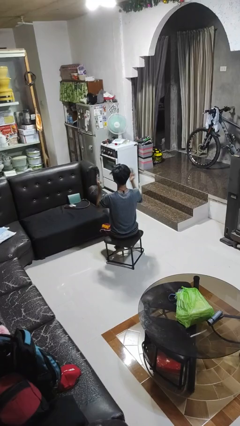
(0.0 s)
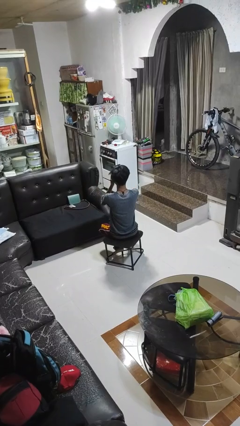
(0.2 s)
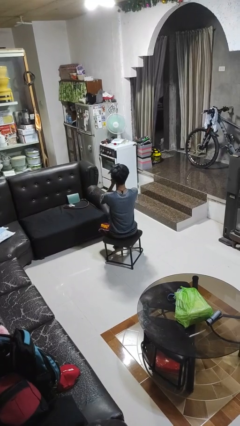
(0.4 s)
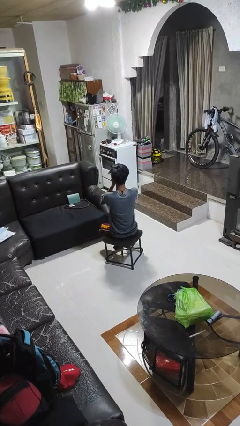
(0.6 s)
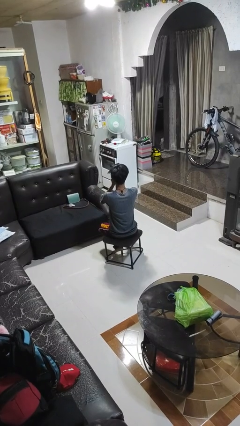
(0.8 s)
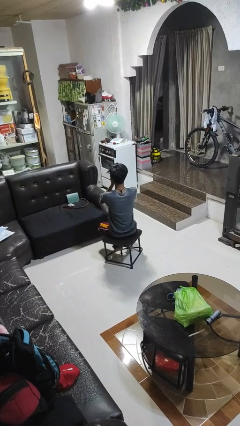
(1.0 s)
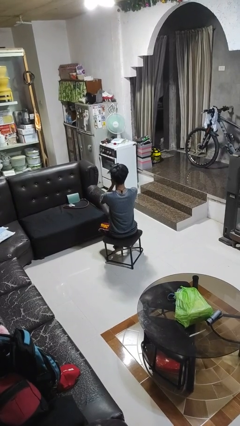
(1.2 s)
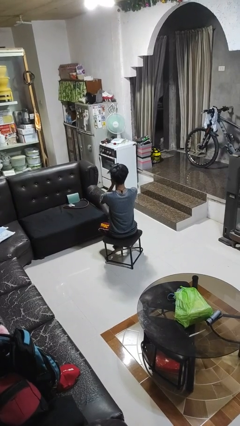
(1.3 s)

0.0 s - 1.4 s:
person covers face with hands

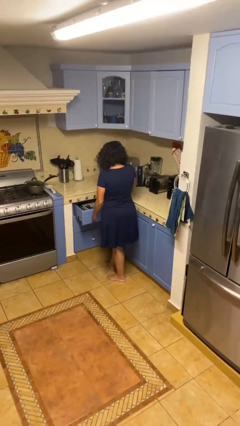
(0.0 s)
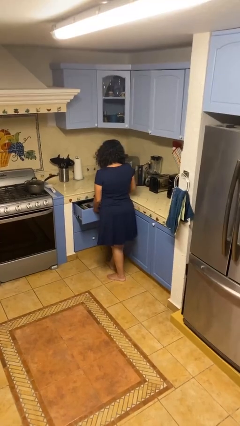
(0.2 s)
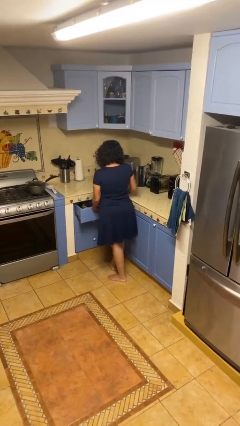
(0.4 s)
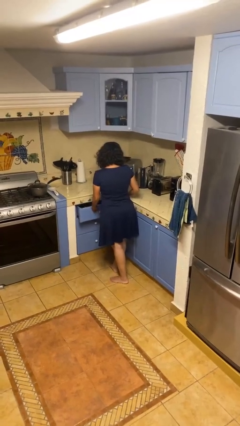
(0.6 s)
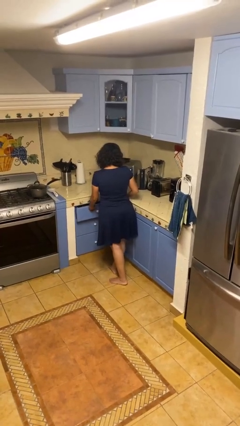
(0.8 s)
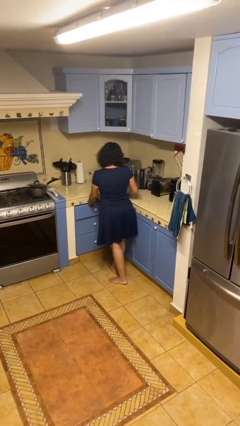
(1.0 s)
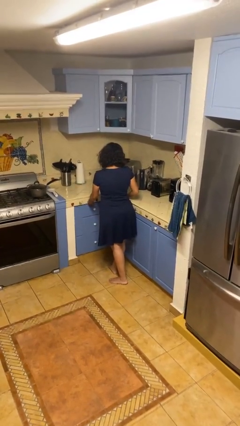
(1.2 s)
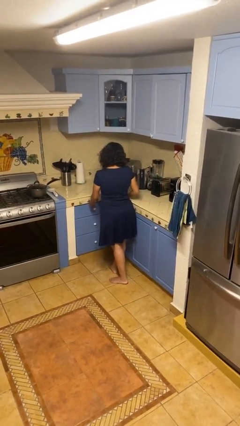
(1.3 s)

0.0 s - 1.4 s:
person closes kitchen drawer

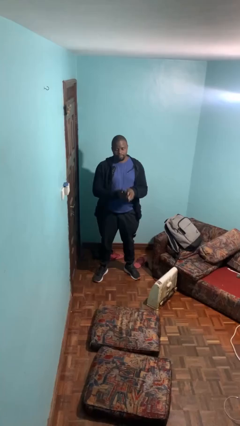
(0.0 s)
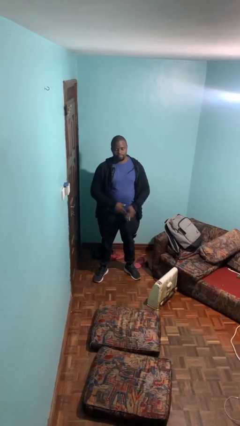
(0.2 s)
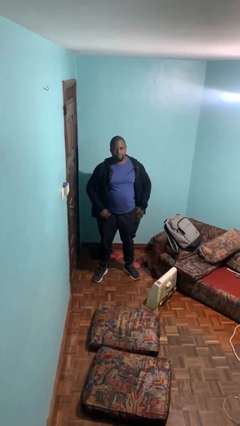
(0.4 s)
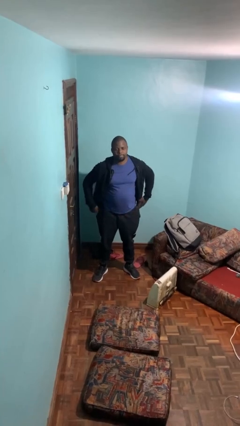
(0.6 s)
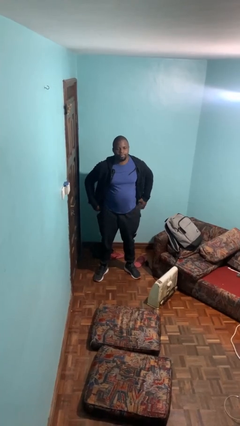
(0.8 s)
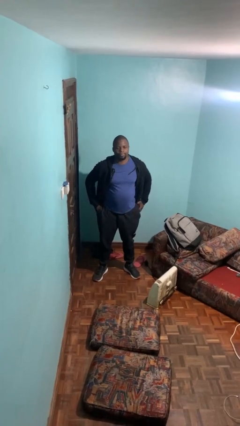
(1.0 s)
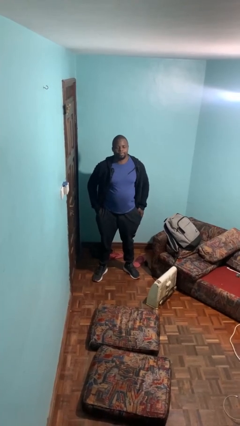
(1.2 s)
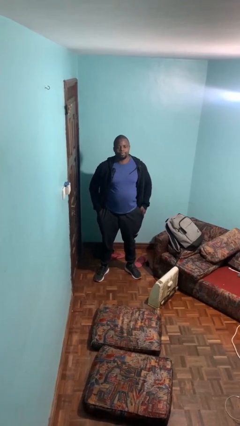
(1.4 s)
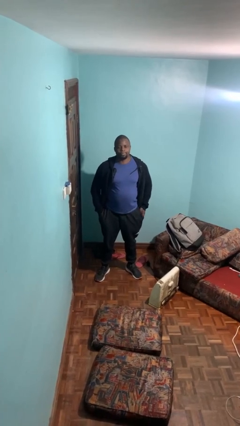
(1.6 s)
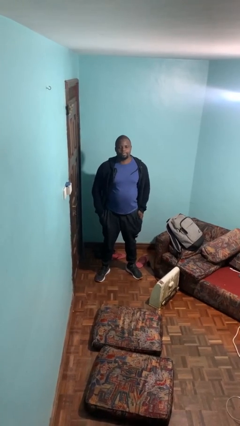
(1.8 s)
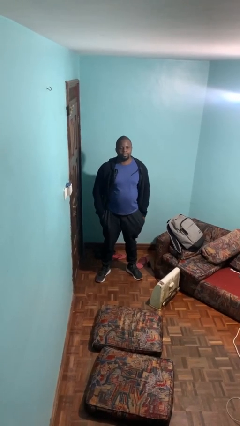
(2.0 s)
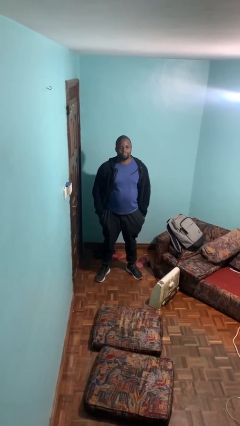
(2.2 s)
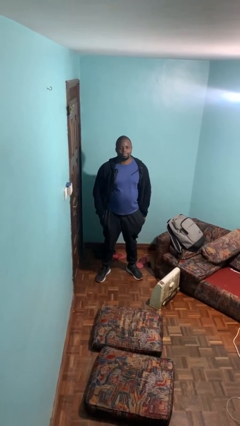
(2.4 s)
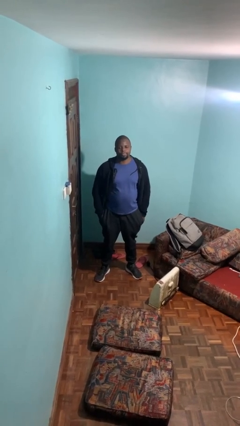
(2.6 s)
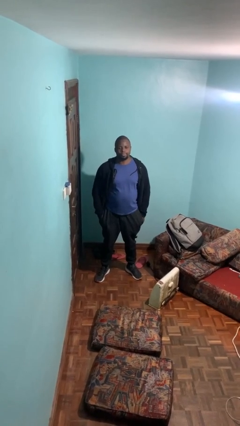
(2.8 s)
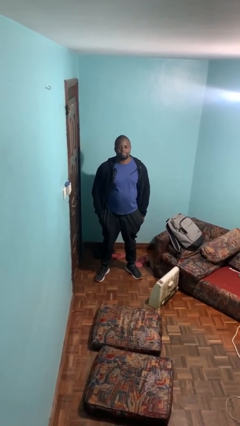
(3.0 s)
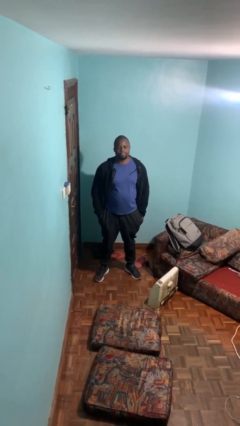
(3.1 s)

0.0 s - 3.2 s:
person puts phone into pocket

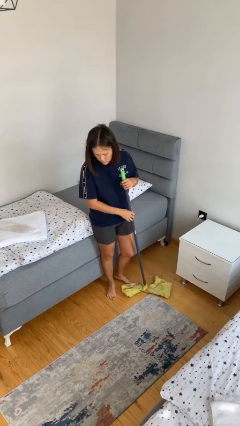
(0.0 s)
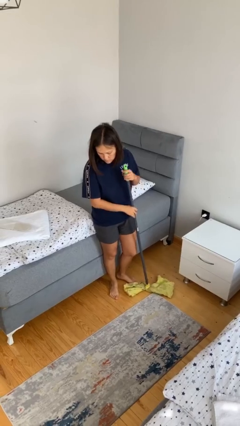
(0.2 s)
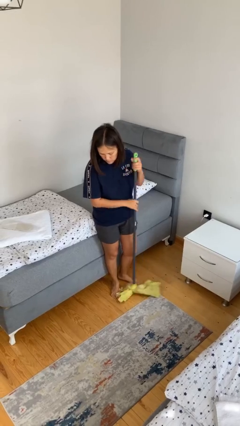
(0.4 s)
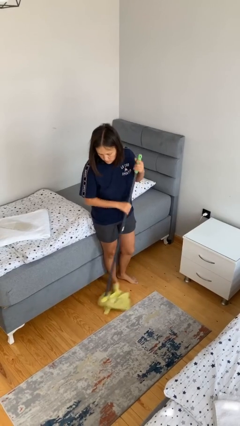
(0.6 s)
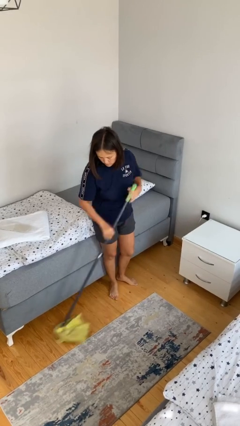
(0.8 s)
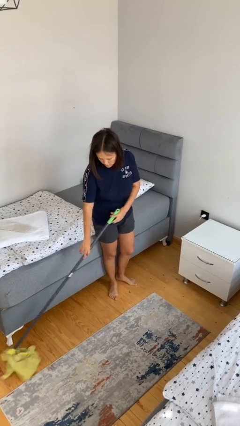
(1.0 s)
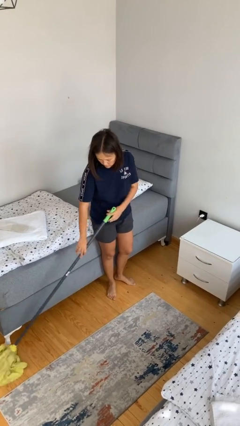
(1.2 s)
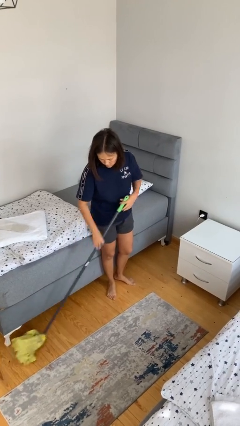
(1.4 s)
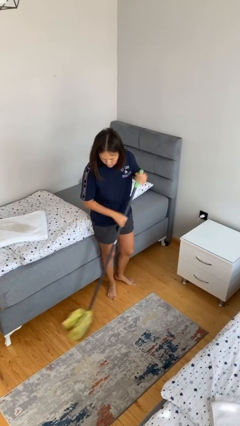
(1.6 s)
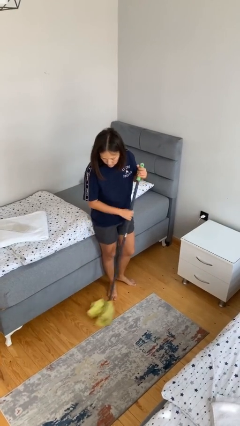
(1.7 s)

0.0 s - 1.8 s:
person sweeps floor

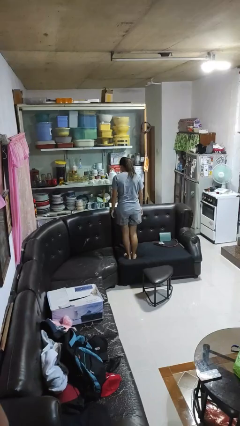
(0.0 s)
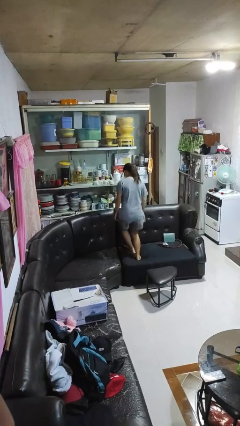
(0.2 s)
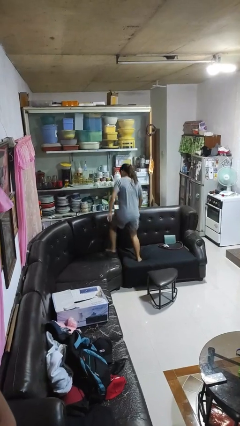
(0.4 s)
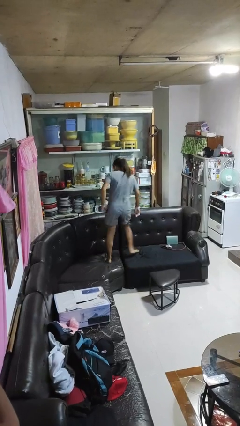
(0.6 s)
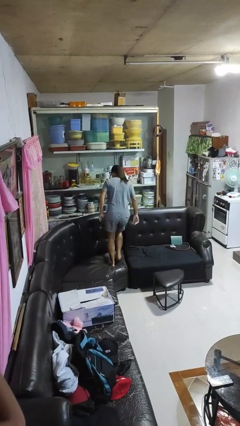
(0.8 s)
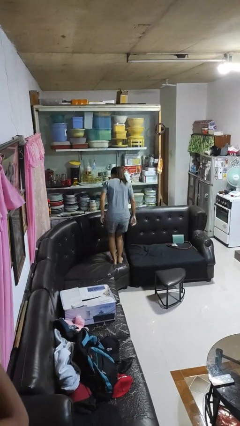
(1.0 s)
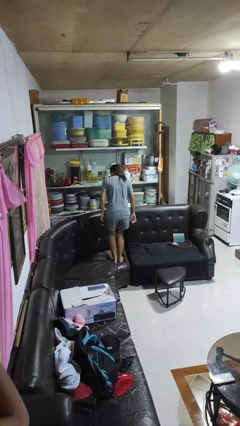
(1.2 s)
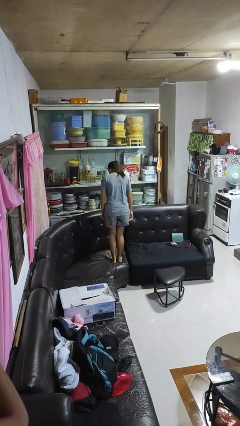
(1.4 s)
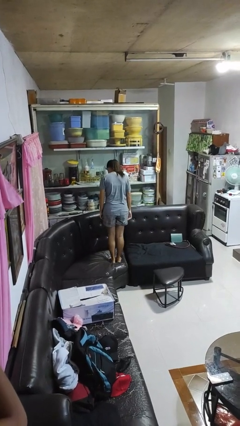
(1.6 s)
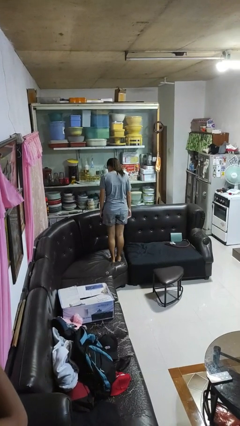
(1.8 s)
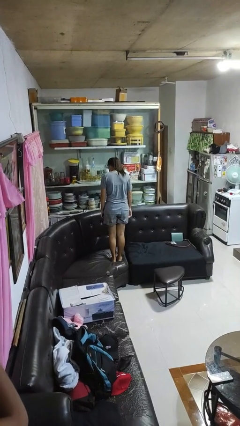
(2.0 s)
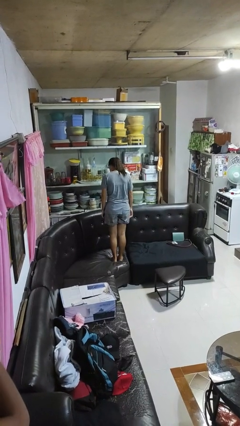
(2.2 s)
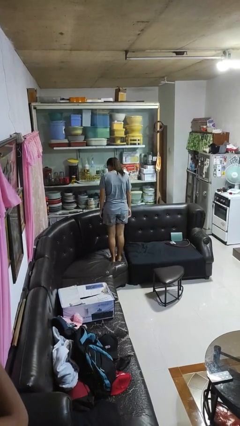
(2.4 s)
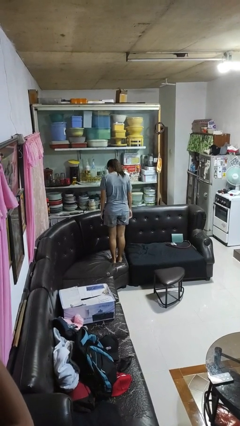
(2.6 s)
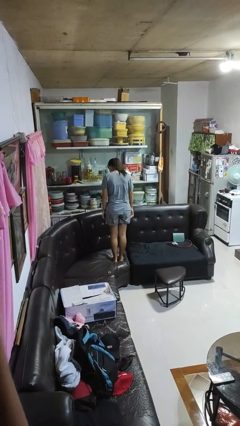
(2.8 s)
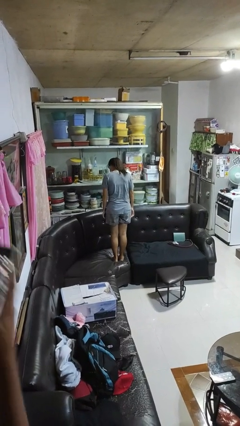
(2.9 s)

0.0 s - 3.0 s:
person jumps on couch

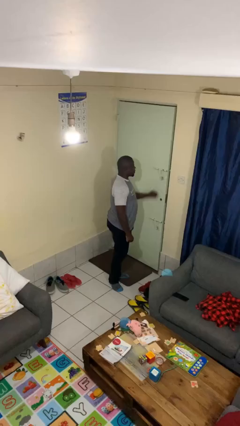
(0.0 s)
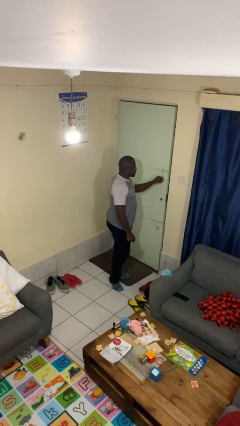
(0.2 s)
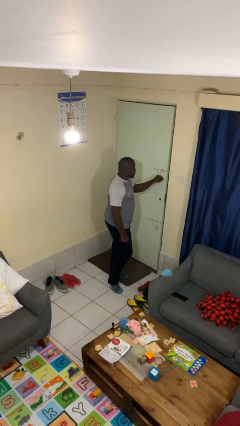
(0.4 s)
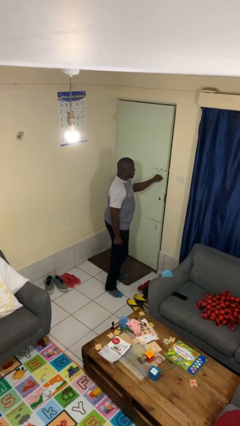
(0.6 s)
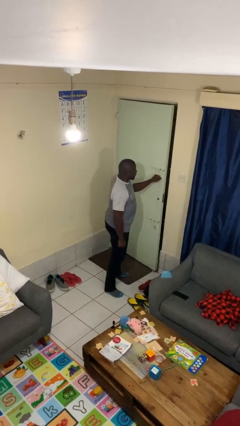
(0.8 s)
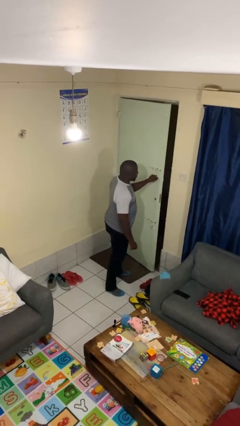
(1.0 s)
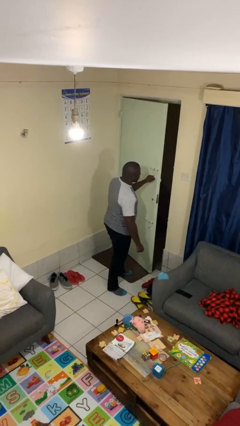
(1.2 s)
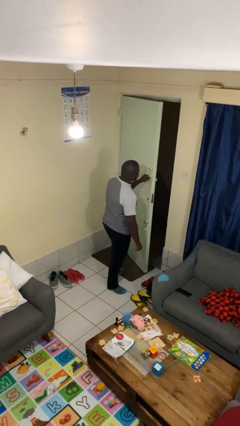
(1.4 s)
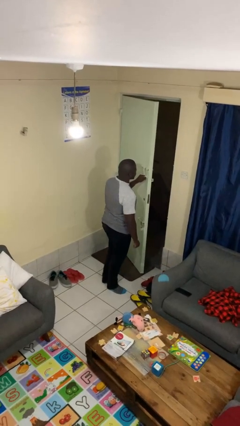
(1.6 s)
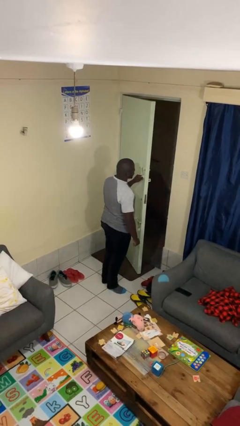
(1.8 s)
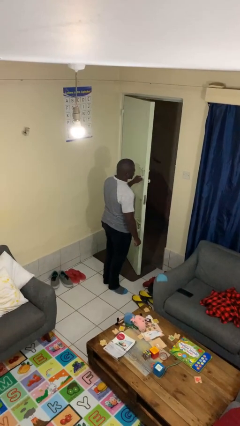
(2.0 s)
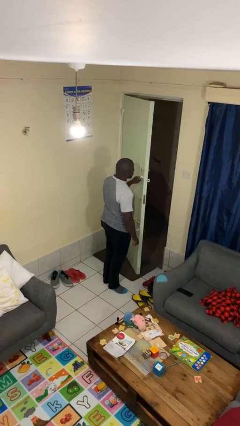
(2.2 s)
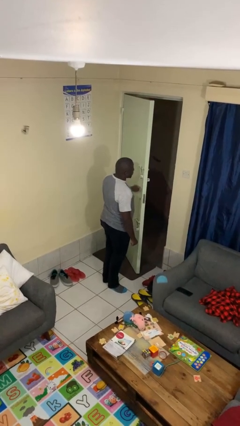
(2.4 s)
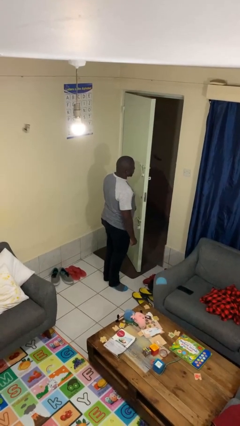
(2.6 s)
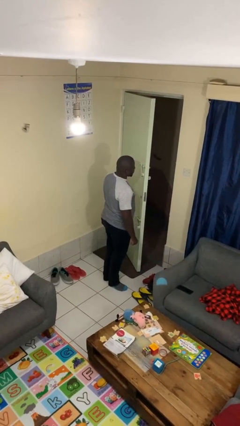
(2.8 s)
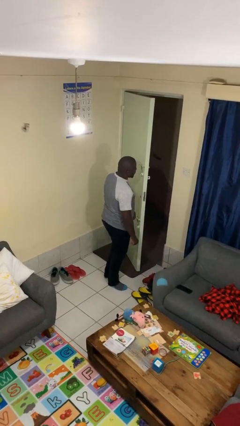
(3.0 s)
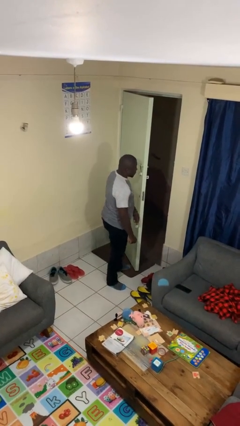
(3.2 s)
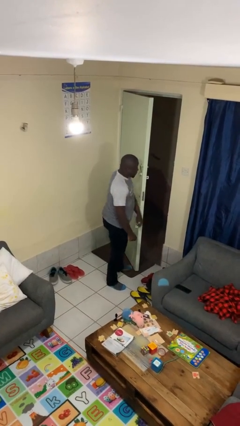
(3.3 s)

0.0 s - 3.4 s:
person opens facility door

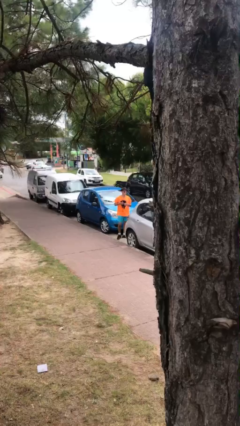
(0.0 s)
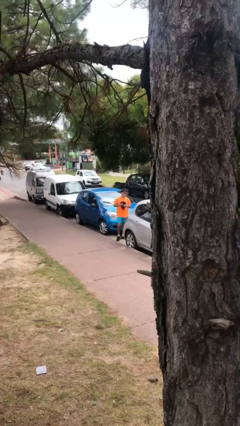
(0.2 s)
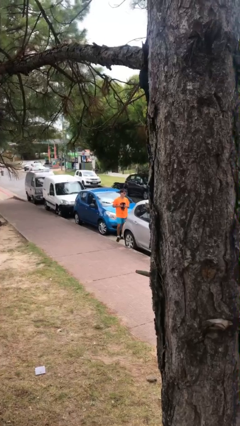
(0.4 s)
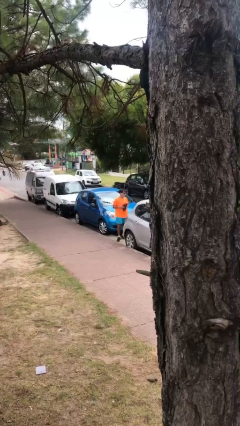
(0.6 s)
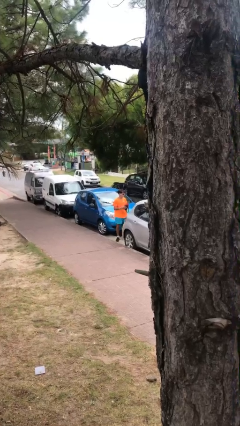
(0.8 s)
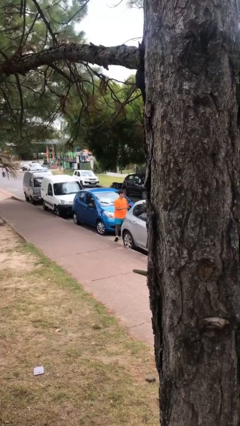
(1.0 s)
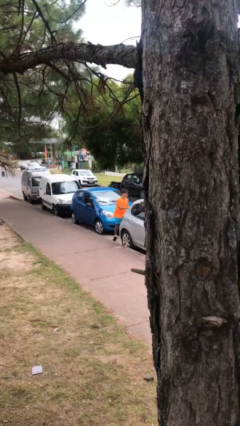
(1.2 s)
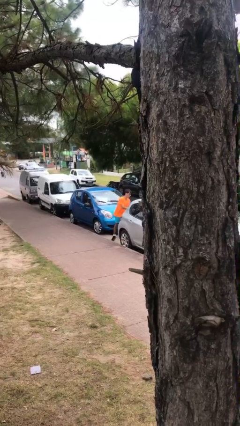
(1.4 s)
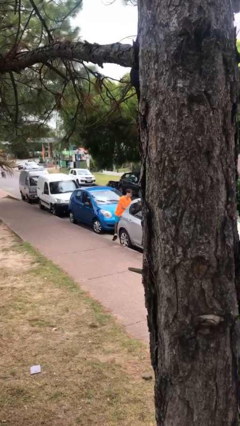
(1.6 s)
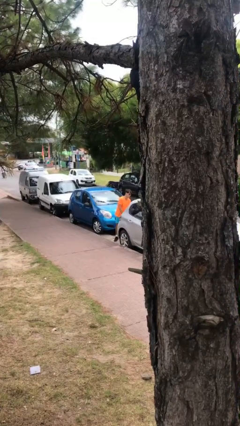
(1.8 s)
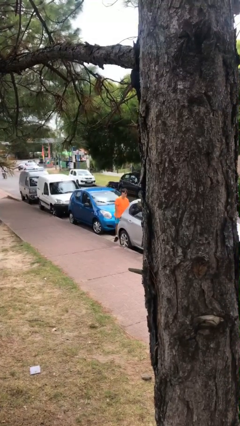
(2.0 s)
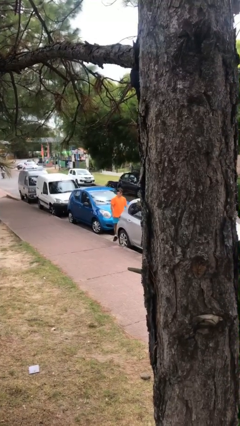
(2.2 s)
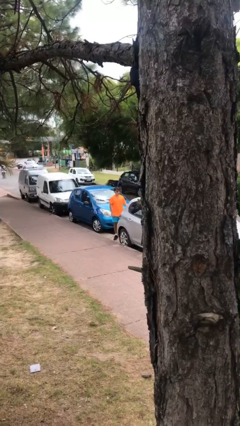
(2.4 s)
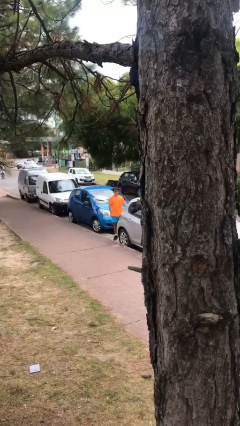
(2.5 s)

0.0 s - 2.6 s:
person loads car
